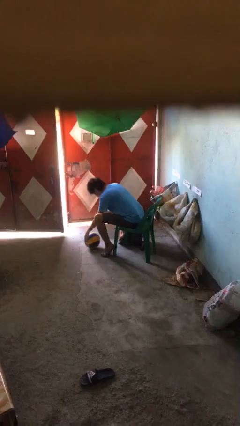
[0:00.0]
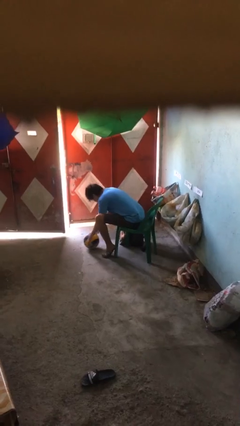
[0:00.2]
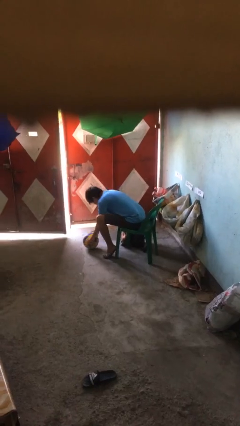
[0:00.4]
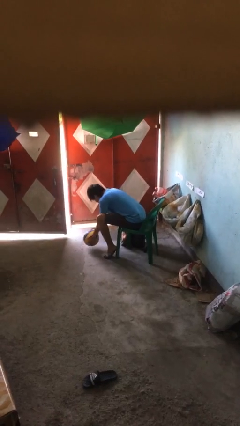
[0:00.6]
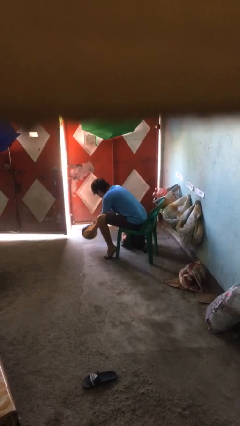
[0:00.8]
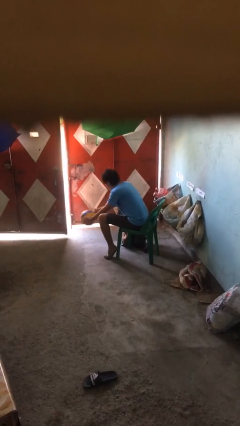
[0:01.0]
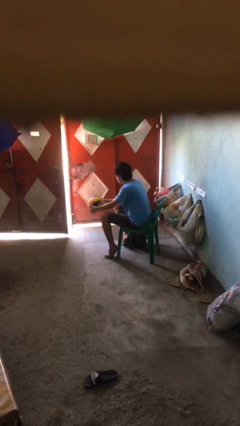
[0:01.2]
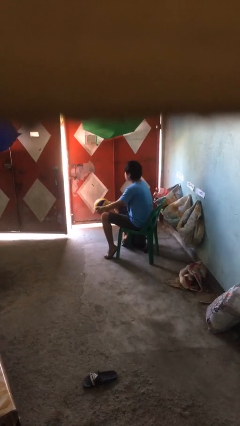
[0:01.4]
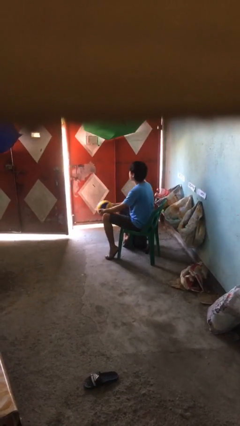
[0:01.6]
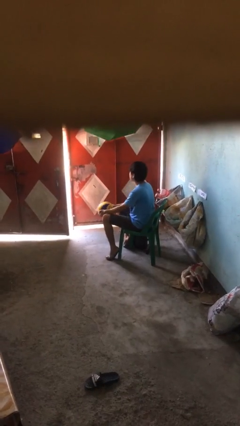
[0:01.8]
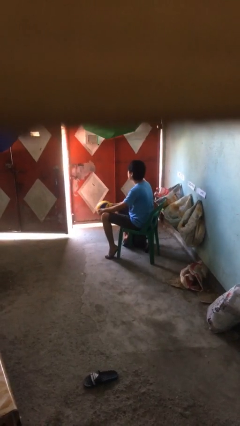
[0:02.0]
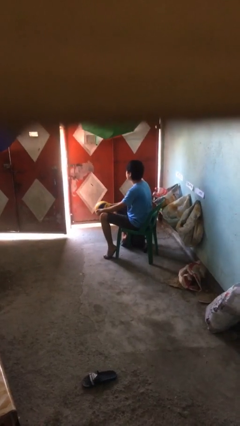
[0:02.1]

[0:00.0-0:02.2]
person picks up object from floor

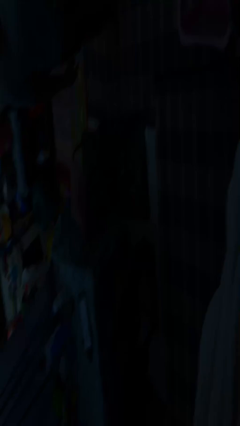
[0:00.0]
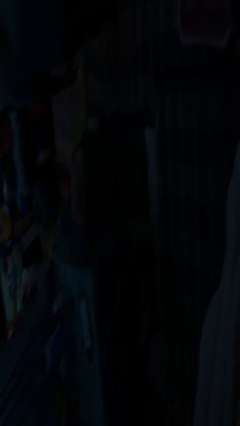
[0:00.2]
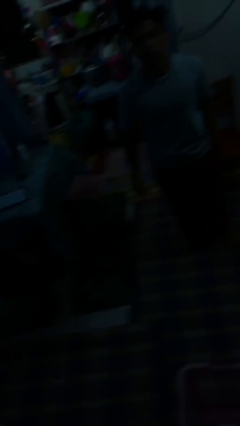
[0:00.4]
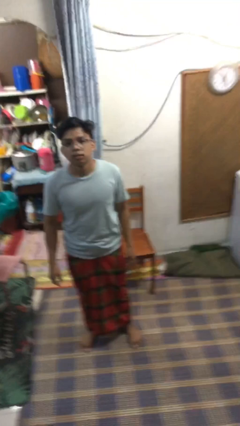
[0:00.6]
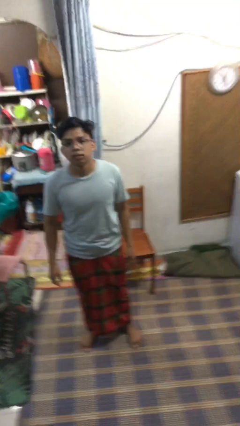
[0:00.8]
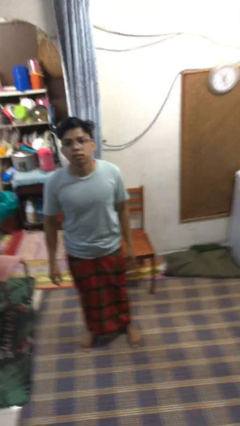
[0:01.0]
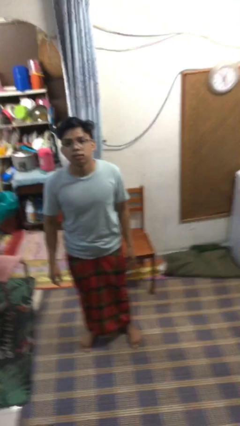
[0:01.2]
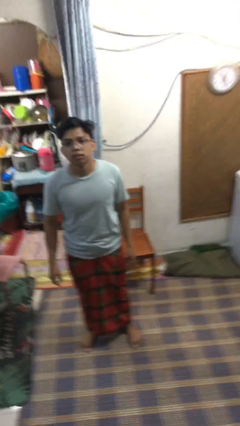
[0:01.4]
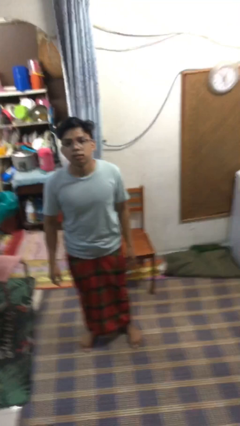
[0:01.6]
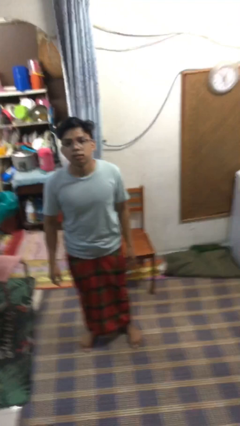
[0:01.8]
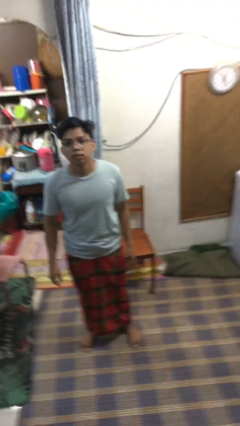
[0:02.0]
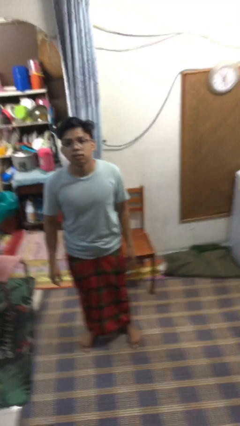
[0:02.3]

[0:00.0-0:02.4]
person twirls

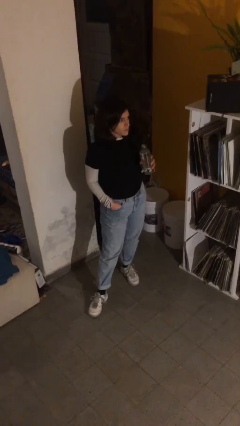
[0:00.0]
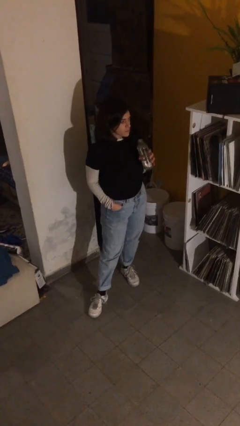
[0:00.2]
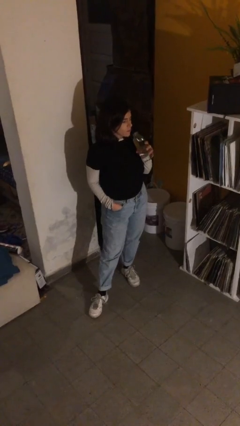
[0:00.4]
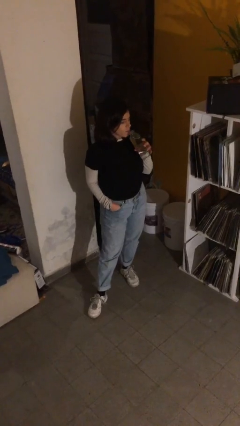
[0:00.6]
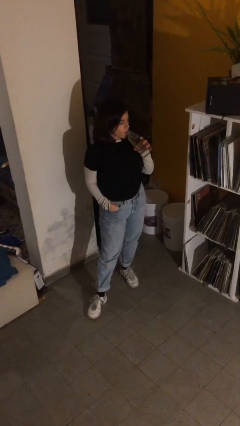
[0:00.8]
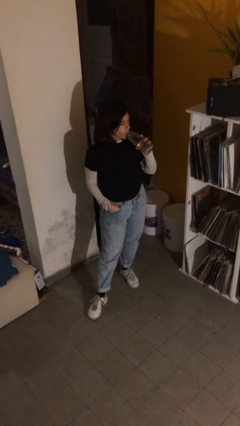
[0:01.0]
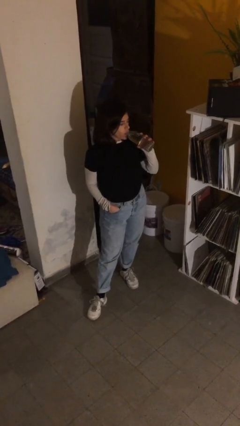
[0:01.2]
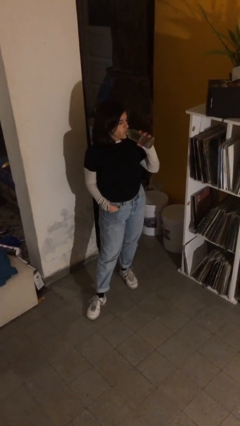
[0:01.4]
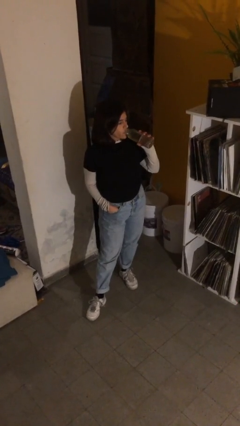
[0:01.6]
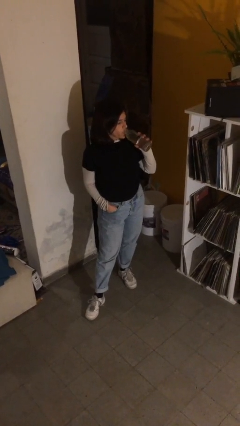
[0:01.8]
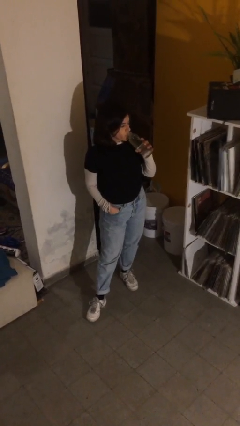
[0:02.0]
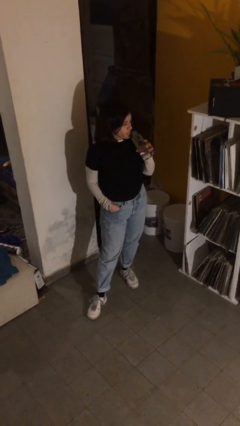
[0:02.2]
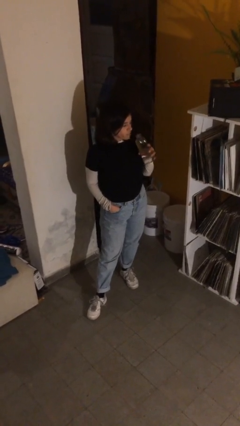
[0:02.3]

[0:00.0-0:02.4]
person drinks from bottle

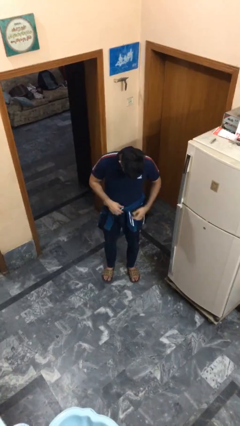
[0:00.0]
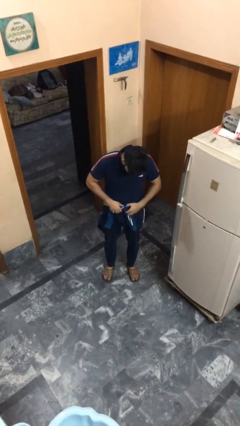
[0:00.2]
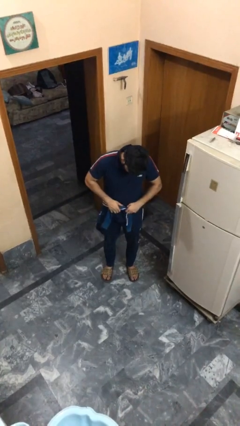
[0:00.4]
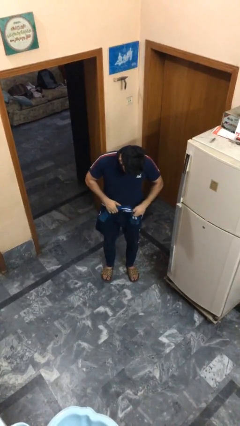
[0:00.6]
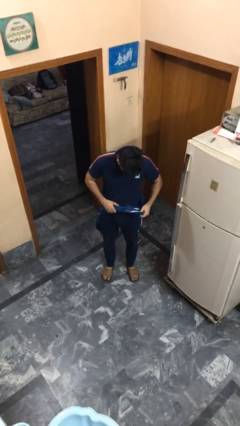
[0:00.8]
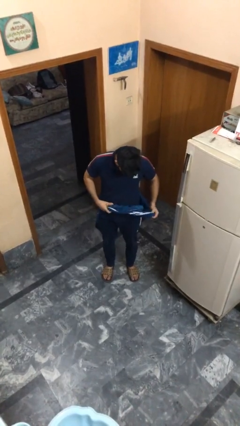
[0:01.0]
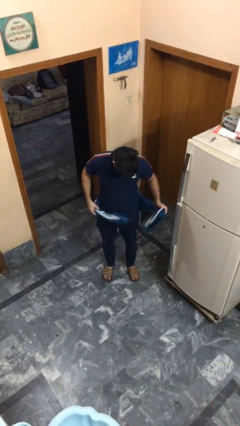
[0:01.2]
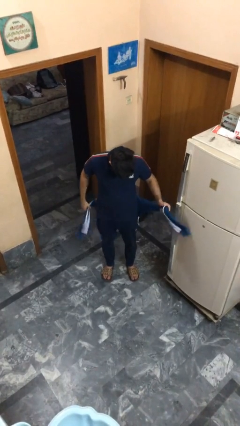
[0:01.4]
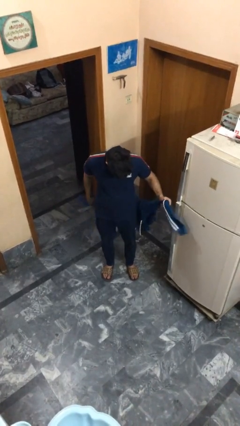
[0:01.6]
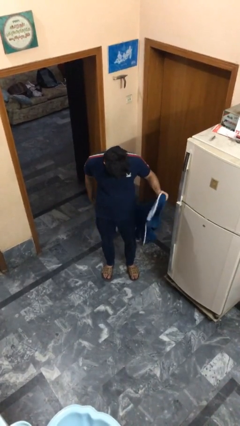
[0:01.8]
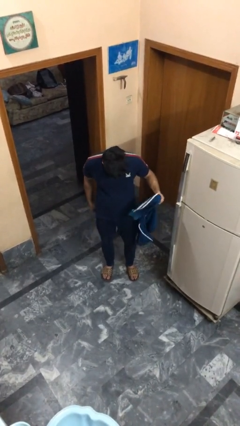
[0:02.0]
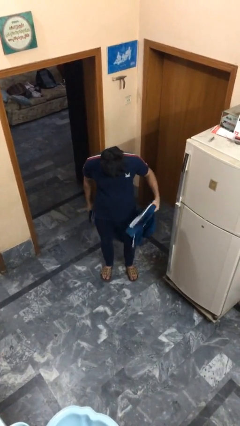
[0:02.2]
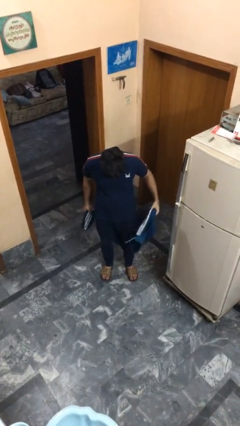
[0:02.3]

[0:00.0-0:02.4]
person unties jacket around waist

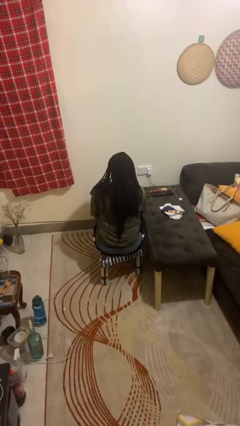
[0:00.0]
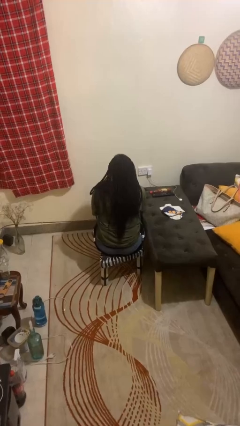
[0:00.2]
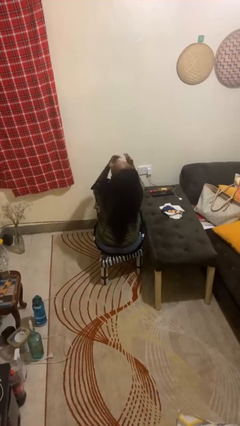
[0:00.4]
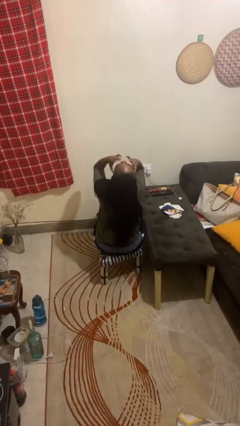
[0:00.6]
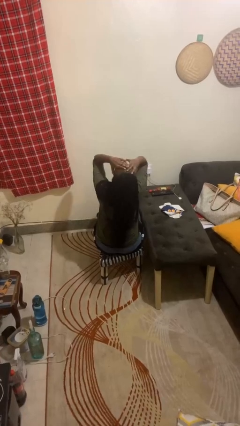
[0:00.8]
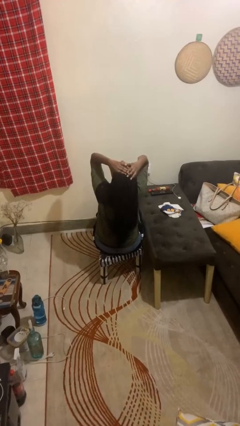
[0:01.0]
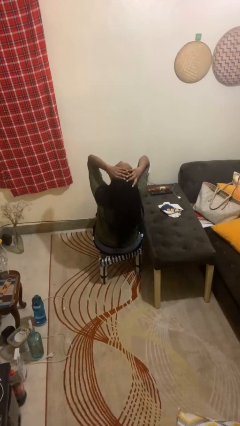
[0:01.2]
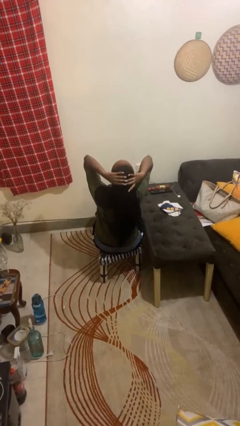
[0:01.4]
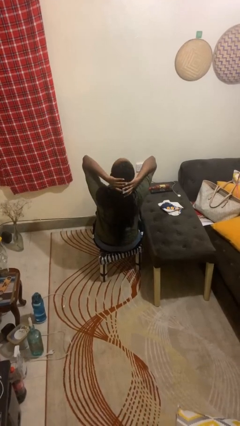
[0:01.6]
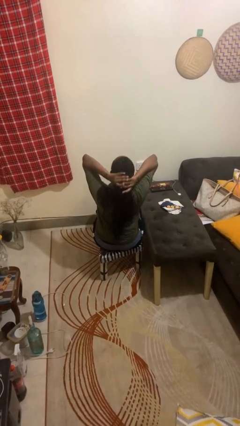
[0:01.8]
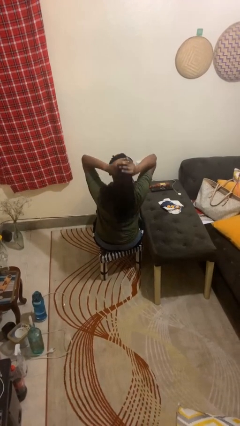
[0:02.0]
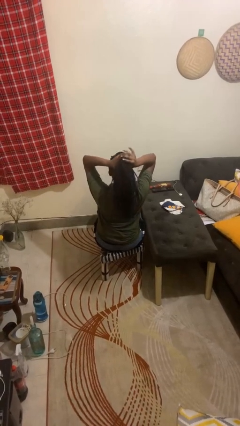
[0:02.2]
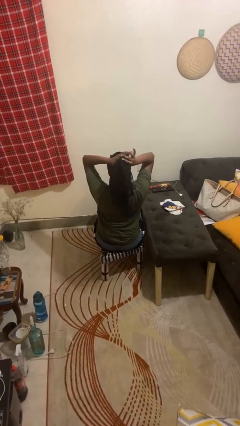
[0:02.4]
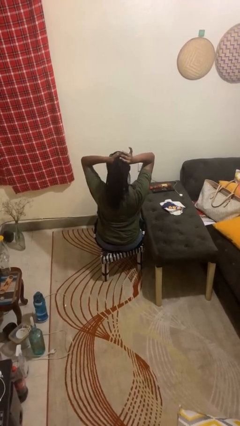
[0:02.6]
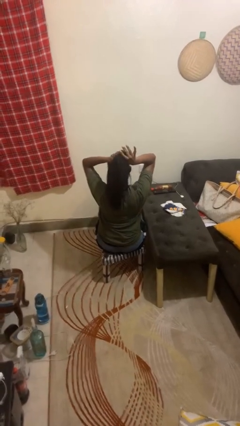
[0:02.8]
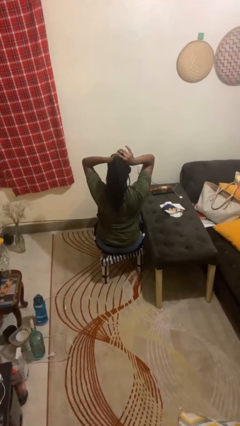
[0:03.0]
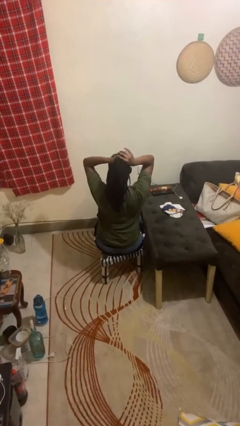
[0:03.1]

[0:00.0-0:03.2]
person puts hair in ponytail

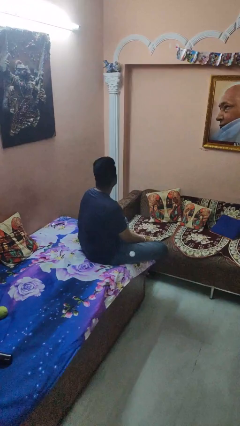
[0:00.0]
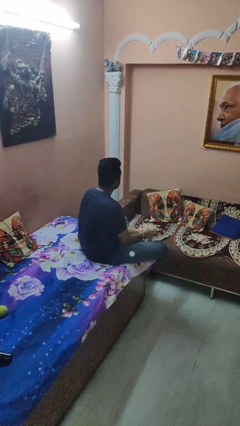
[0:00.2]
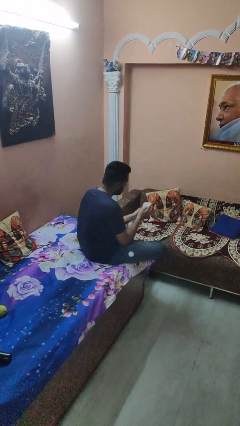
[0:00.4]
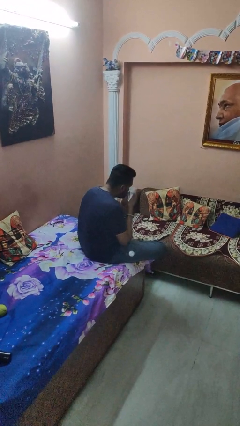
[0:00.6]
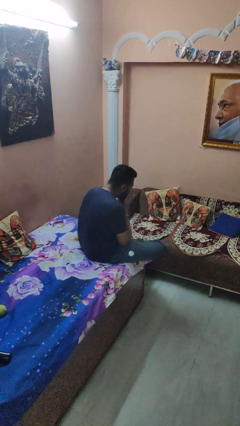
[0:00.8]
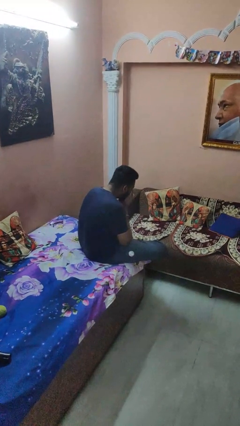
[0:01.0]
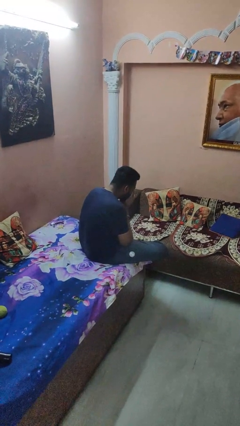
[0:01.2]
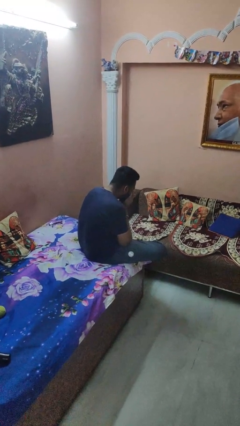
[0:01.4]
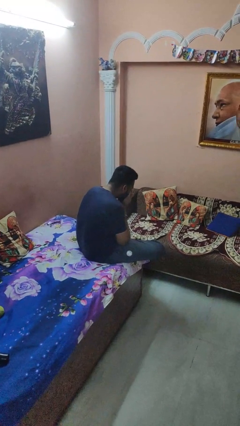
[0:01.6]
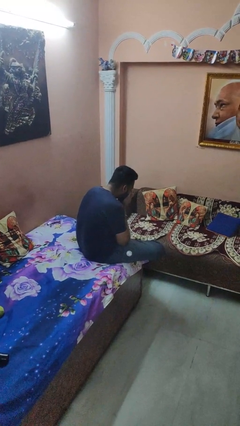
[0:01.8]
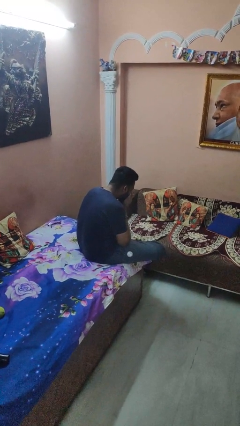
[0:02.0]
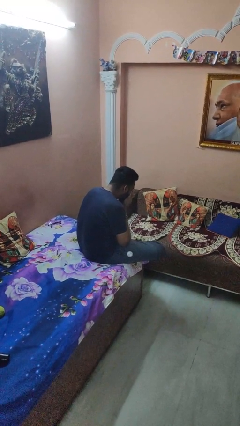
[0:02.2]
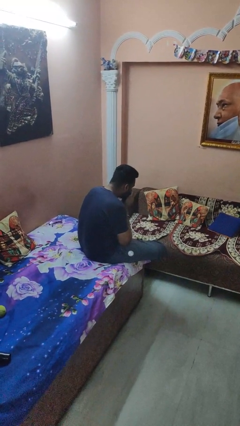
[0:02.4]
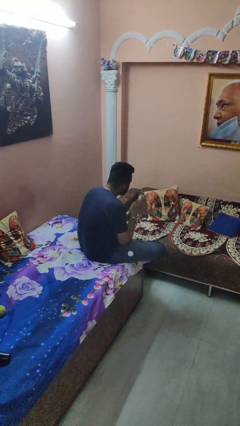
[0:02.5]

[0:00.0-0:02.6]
person blows nose

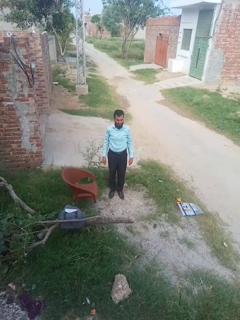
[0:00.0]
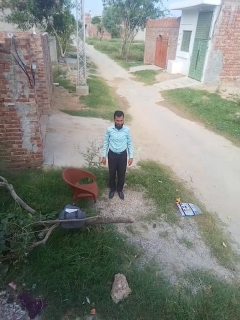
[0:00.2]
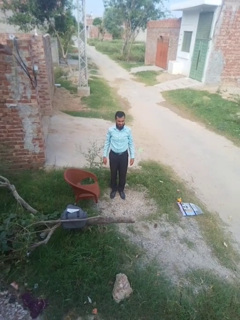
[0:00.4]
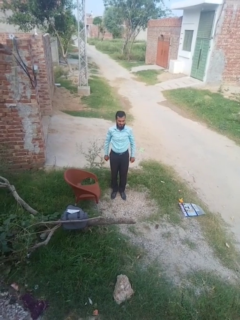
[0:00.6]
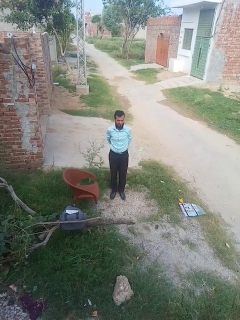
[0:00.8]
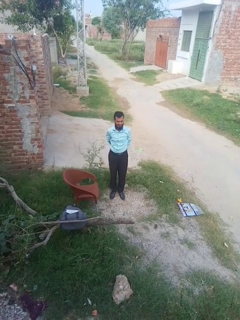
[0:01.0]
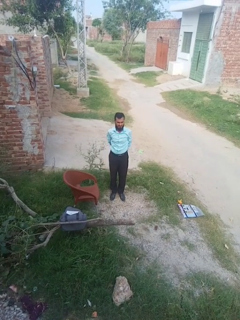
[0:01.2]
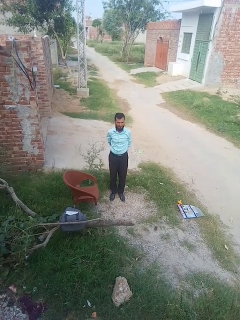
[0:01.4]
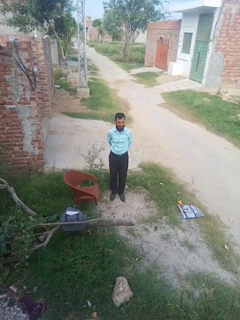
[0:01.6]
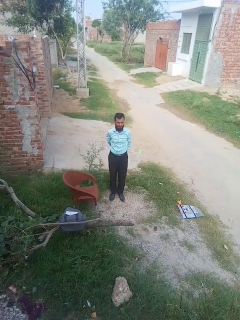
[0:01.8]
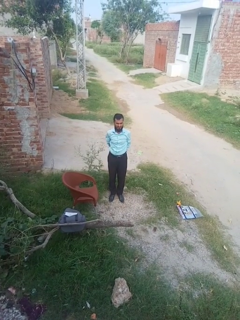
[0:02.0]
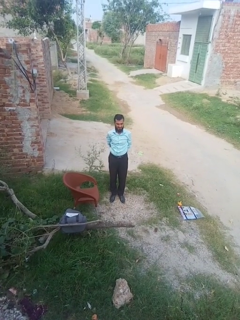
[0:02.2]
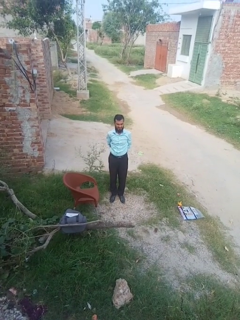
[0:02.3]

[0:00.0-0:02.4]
person stretches back
